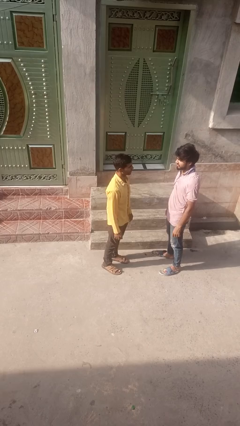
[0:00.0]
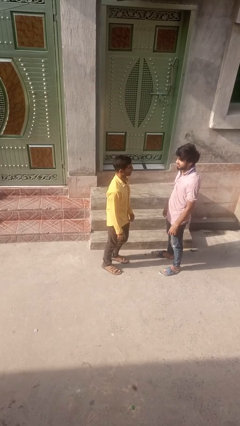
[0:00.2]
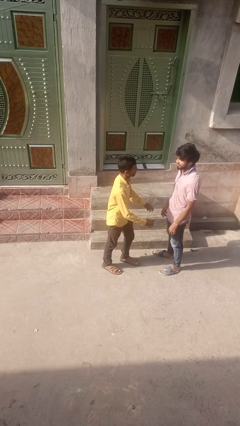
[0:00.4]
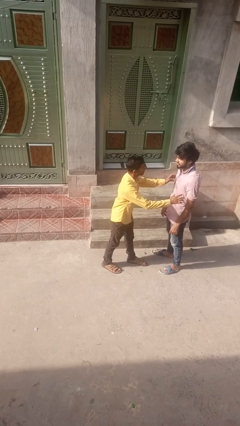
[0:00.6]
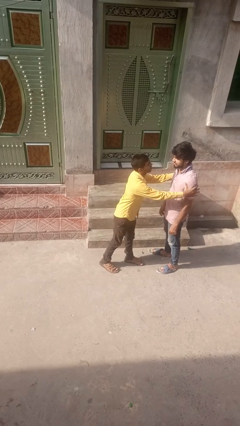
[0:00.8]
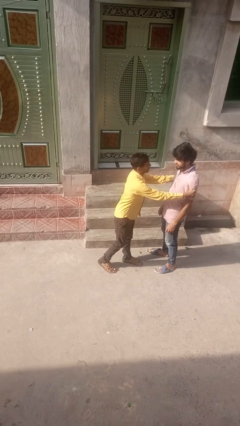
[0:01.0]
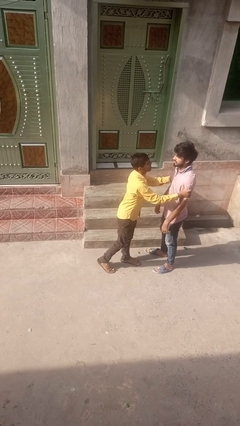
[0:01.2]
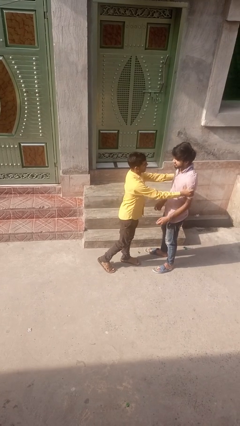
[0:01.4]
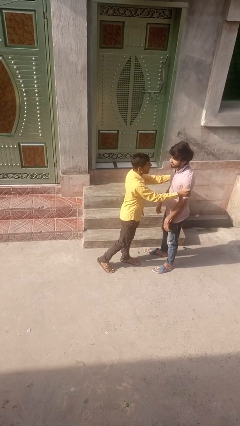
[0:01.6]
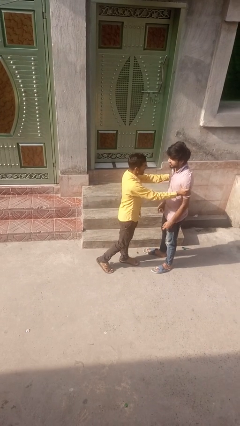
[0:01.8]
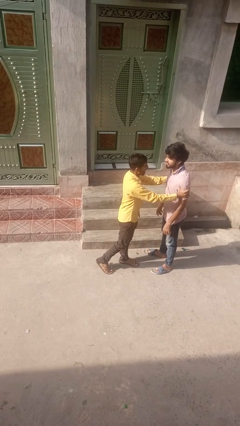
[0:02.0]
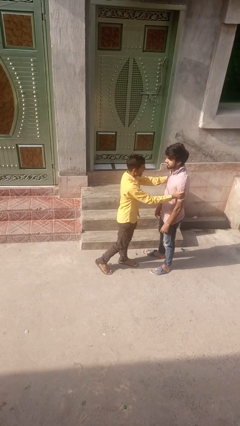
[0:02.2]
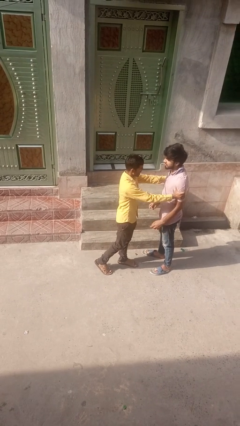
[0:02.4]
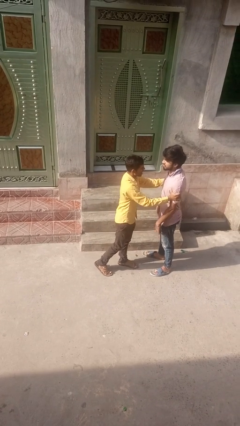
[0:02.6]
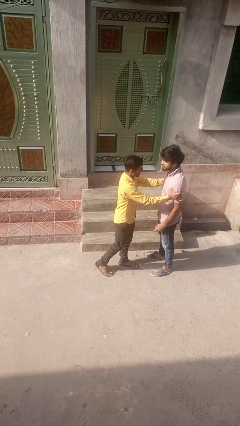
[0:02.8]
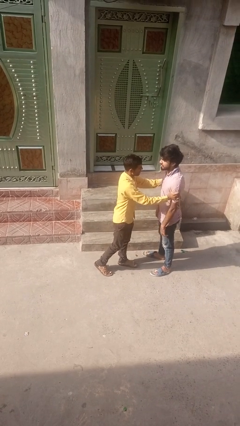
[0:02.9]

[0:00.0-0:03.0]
person grabs person by bicep

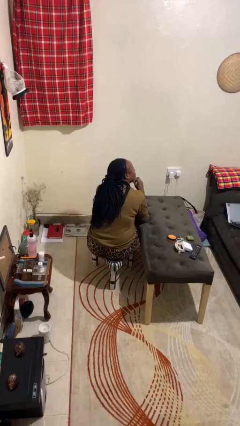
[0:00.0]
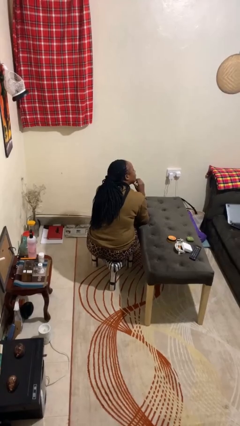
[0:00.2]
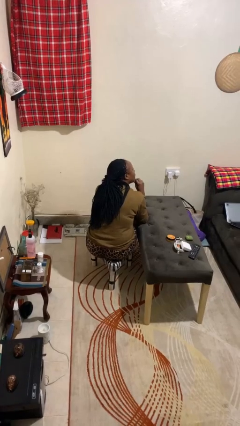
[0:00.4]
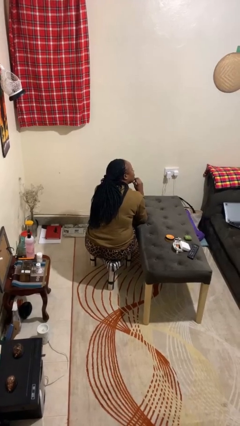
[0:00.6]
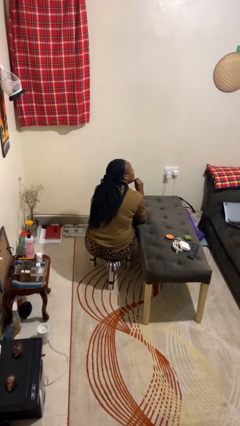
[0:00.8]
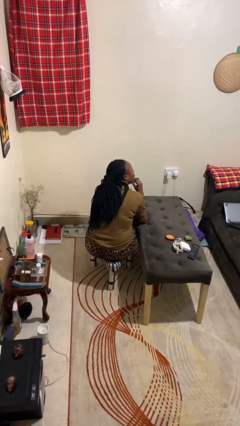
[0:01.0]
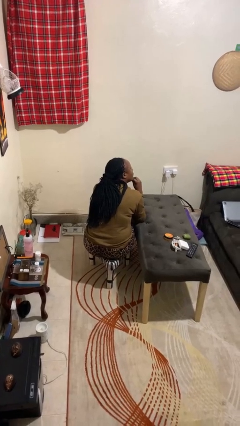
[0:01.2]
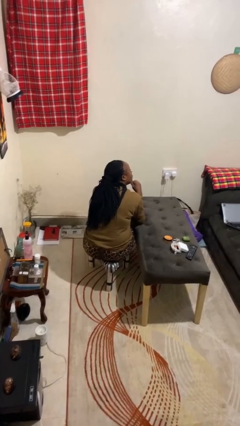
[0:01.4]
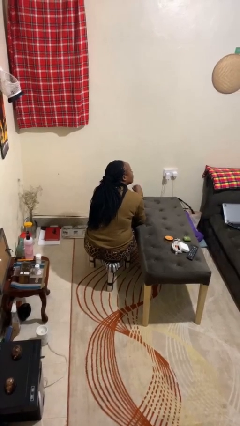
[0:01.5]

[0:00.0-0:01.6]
person strokes chin

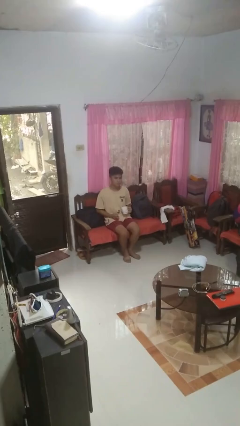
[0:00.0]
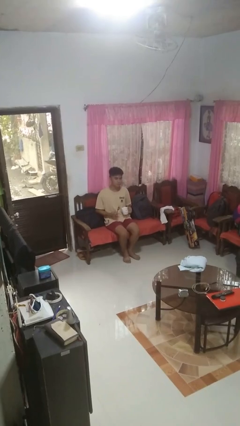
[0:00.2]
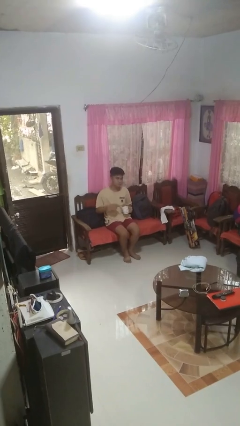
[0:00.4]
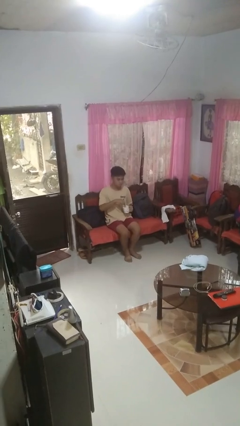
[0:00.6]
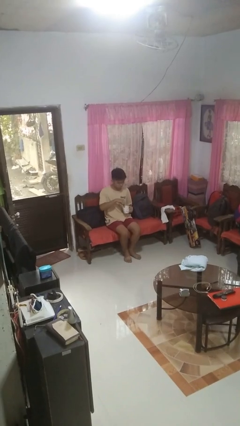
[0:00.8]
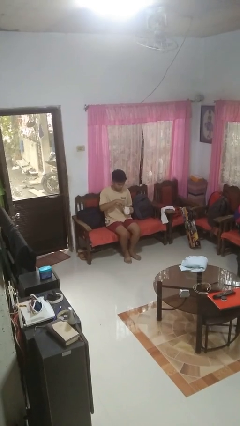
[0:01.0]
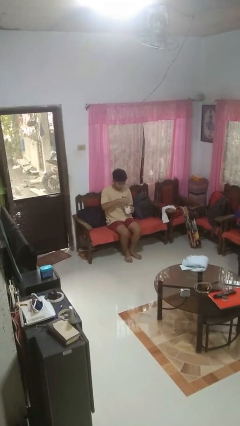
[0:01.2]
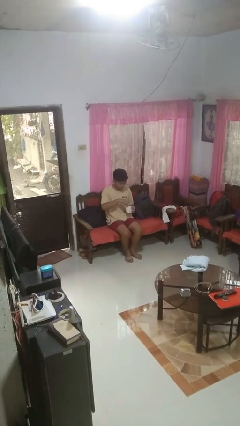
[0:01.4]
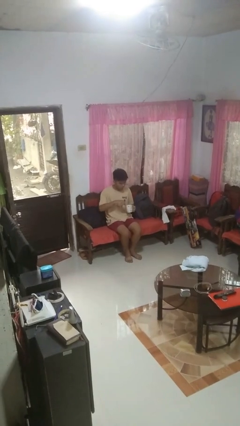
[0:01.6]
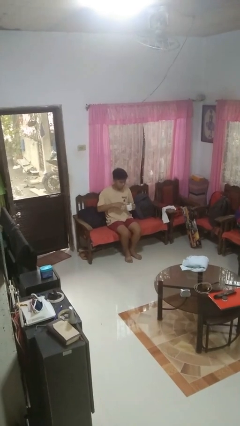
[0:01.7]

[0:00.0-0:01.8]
person stirs mug

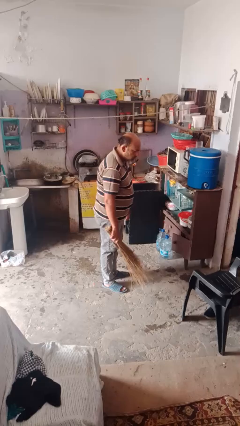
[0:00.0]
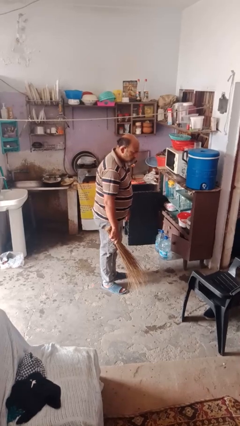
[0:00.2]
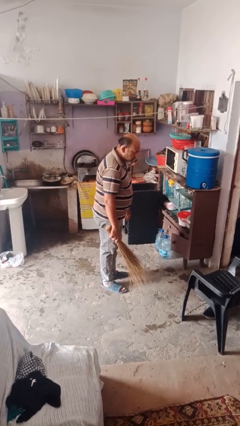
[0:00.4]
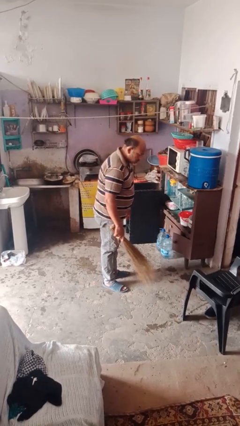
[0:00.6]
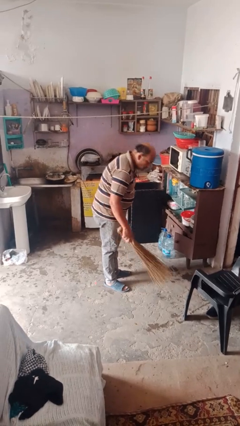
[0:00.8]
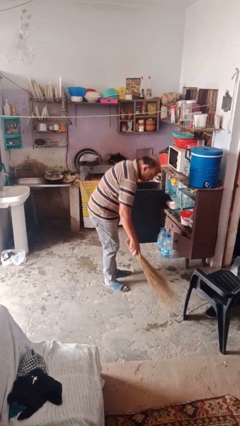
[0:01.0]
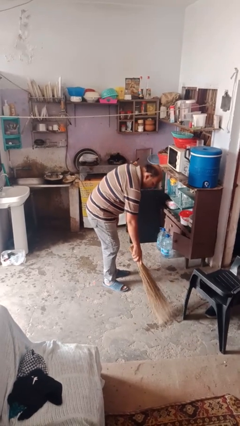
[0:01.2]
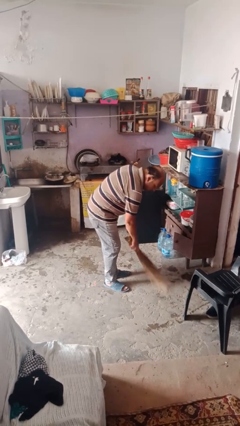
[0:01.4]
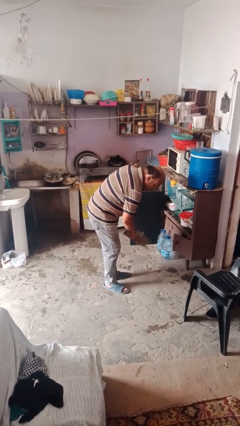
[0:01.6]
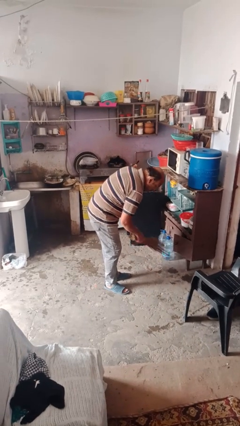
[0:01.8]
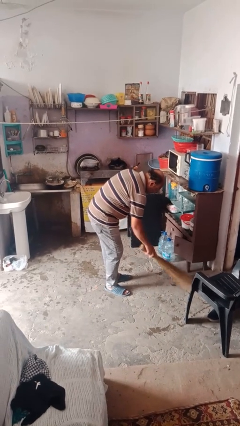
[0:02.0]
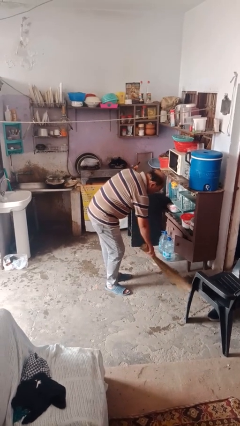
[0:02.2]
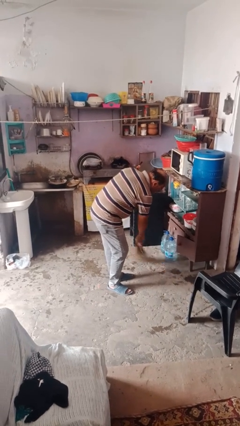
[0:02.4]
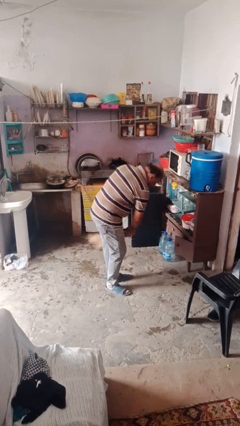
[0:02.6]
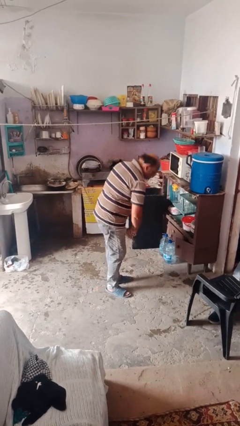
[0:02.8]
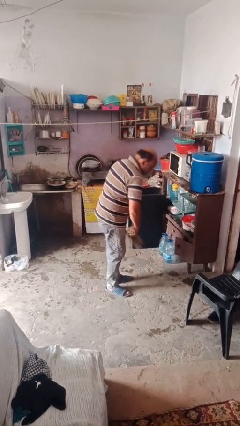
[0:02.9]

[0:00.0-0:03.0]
person sweeps floor

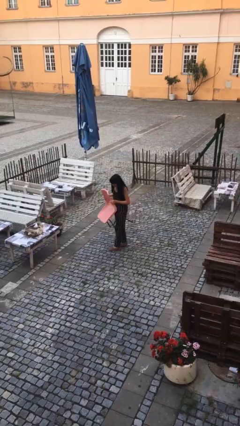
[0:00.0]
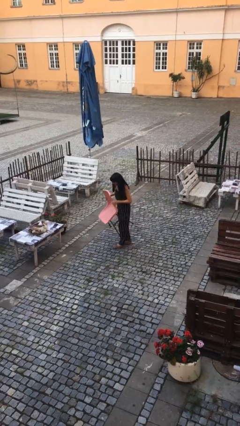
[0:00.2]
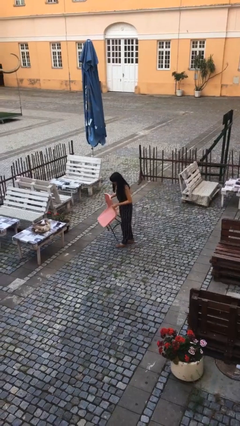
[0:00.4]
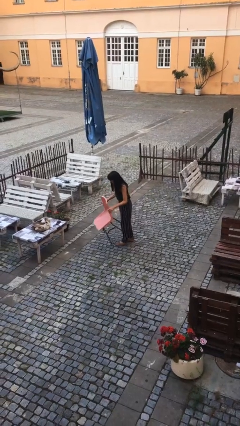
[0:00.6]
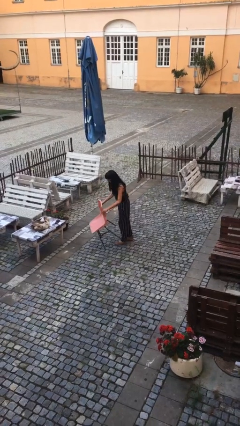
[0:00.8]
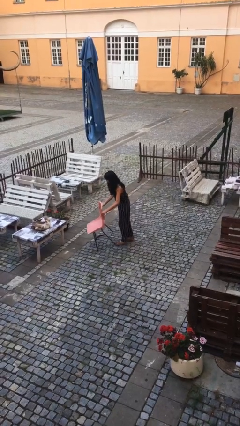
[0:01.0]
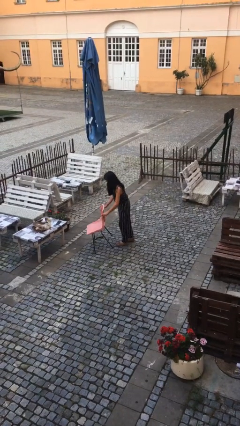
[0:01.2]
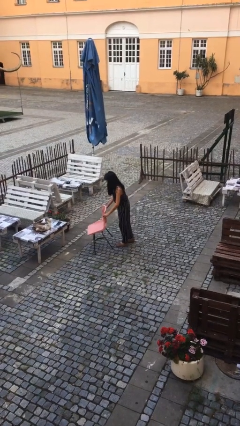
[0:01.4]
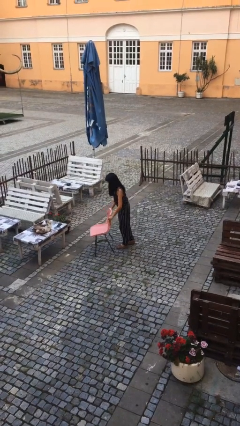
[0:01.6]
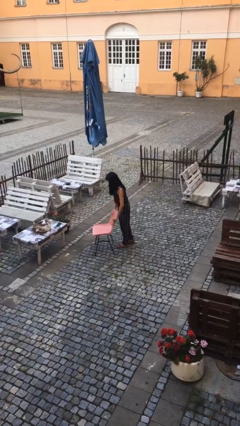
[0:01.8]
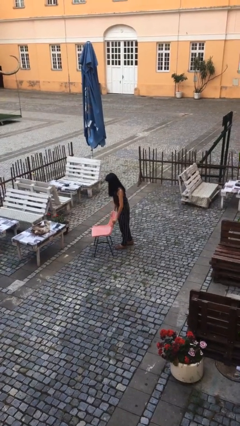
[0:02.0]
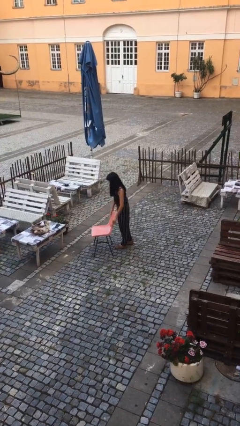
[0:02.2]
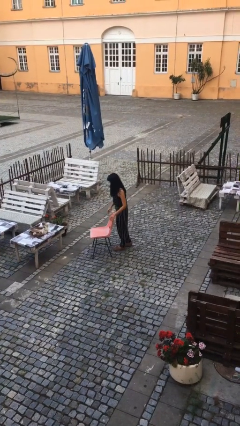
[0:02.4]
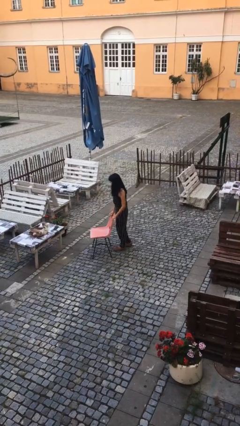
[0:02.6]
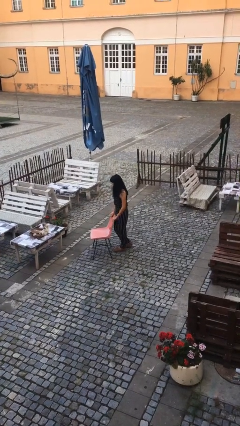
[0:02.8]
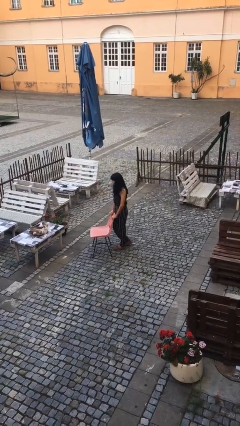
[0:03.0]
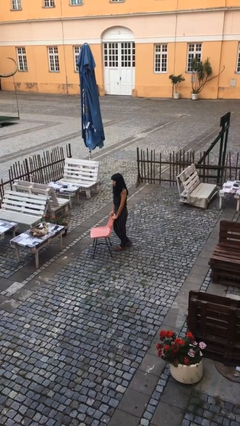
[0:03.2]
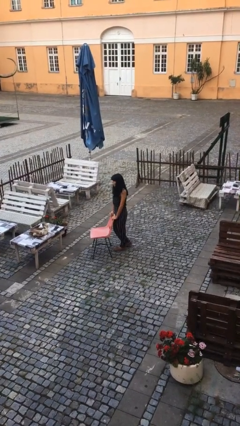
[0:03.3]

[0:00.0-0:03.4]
person puts down object on floor

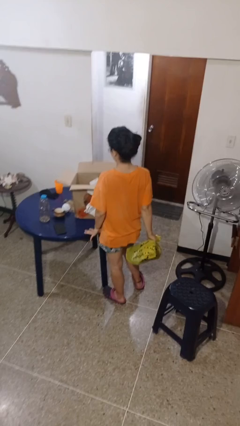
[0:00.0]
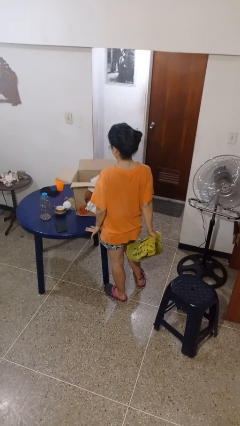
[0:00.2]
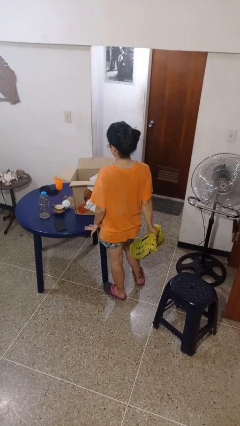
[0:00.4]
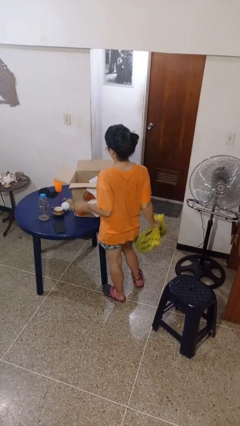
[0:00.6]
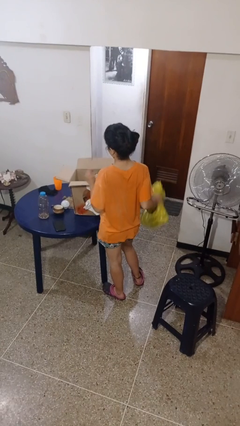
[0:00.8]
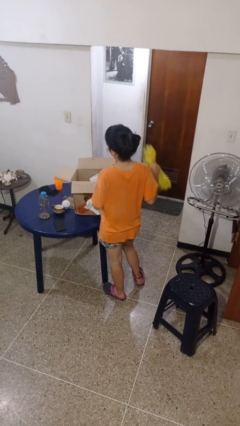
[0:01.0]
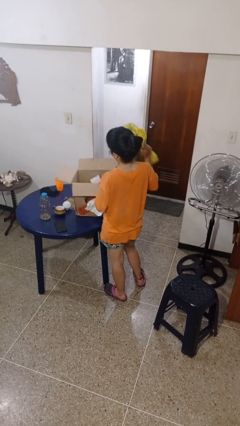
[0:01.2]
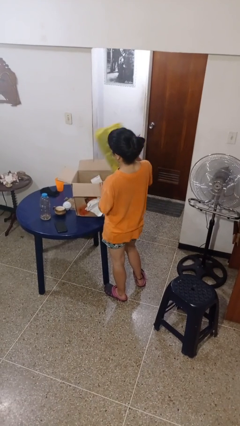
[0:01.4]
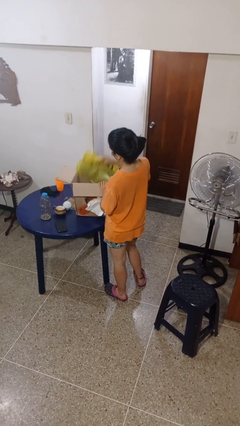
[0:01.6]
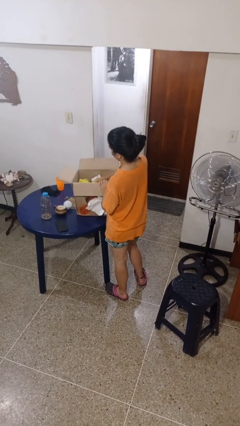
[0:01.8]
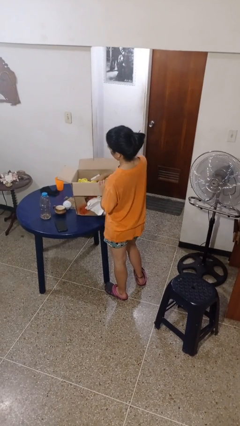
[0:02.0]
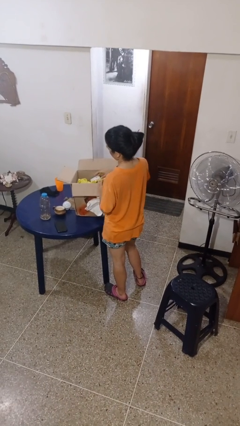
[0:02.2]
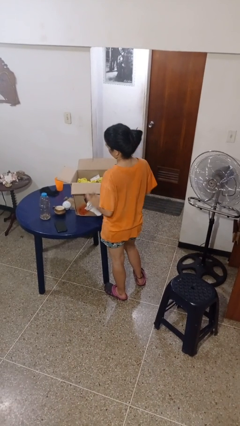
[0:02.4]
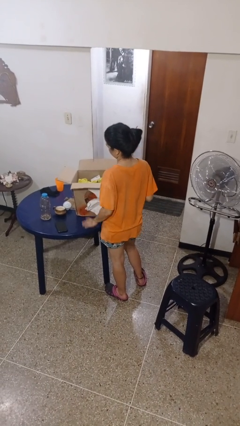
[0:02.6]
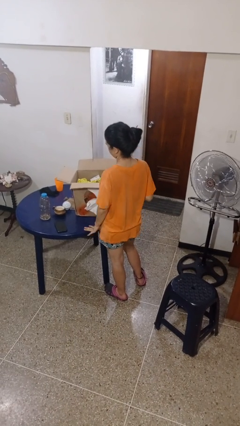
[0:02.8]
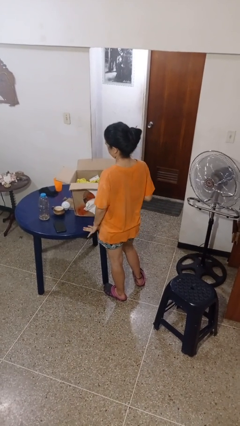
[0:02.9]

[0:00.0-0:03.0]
person puts object into box

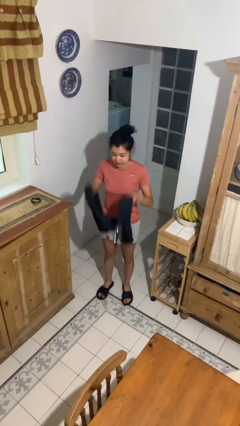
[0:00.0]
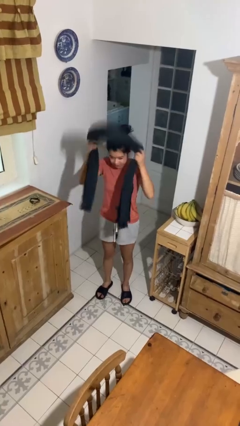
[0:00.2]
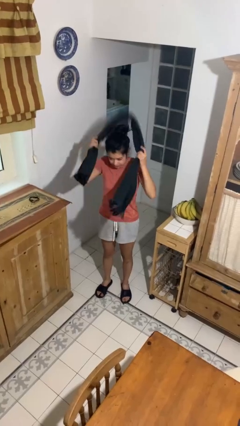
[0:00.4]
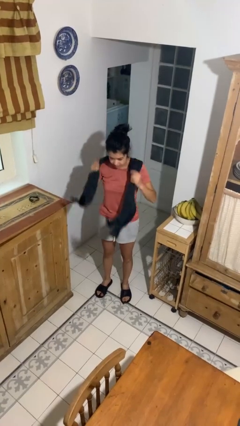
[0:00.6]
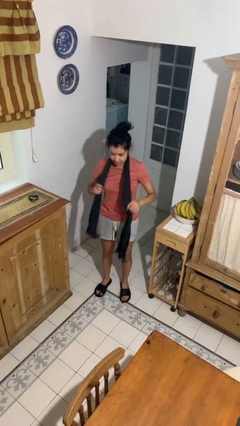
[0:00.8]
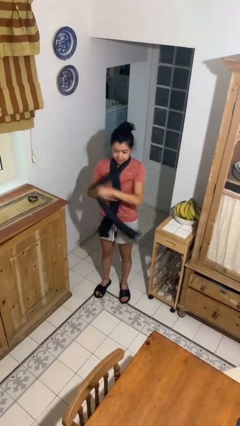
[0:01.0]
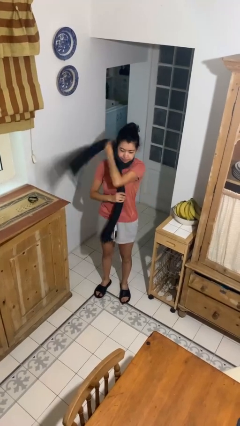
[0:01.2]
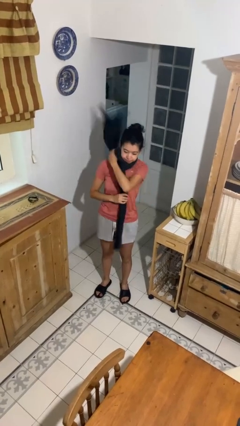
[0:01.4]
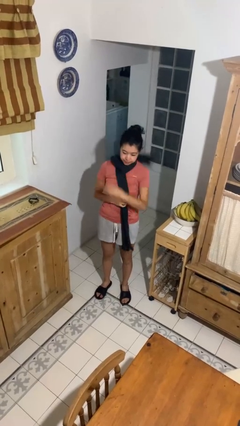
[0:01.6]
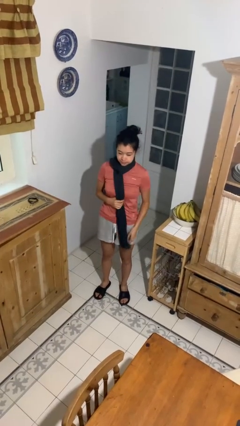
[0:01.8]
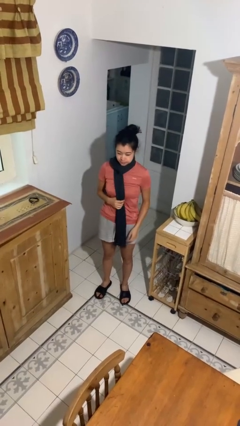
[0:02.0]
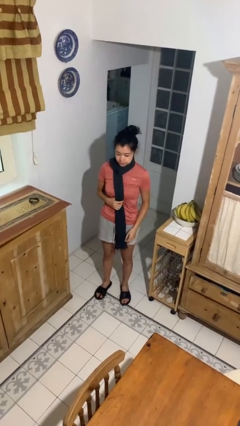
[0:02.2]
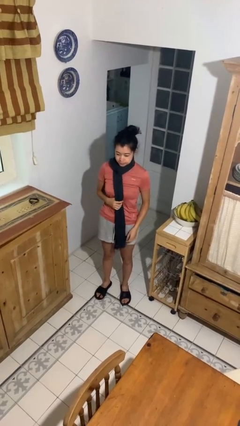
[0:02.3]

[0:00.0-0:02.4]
person puts on scarf
